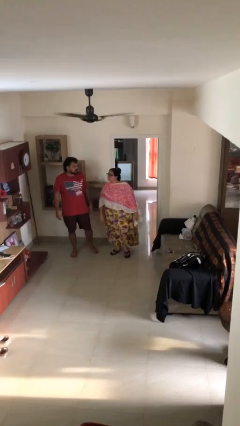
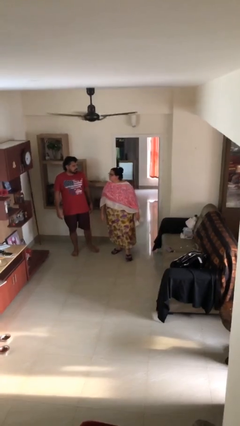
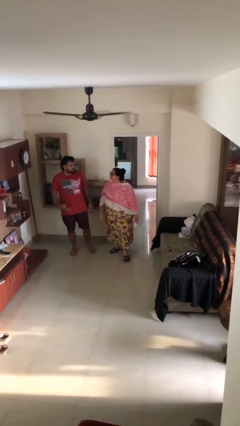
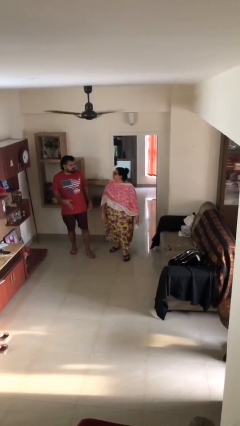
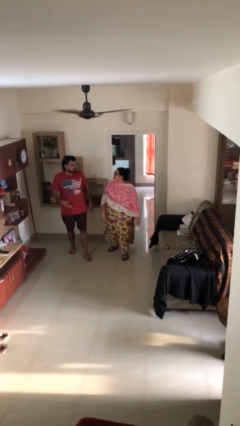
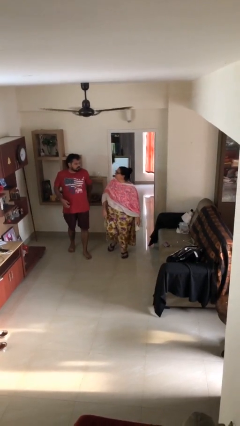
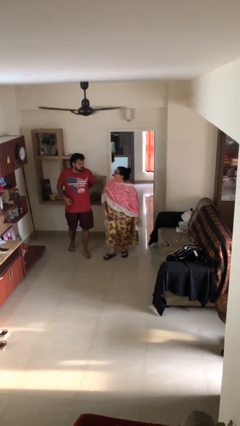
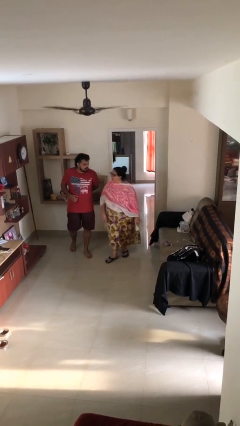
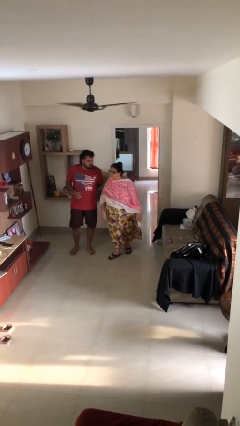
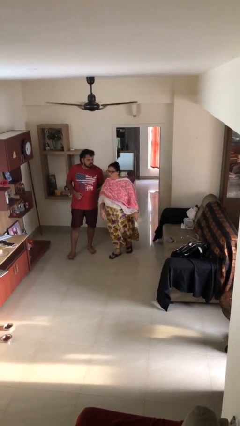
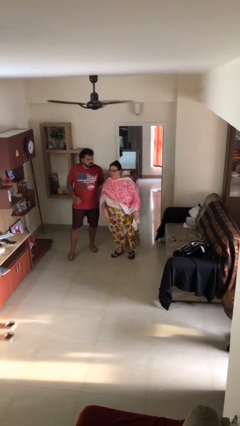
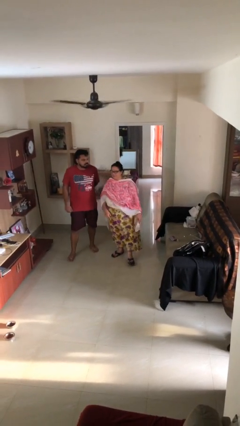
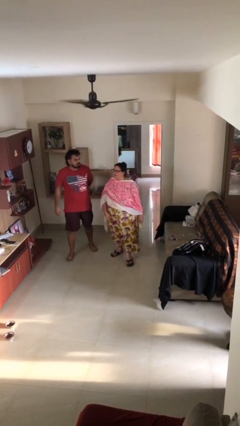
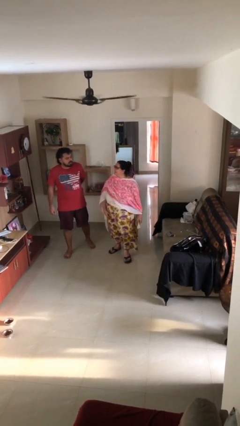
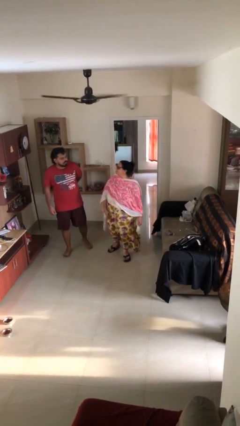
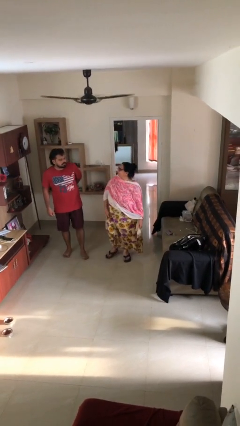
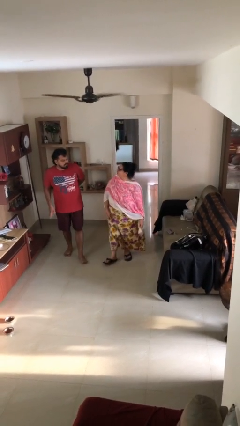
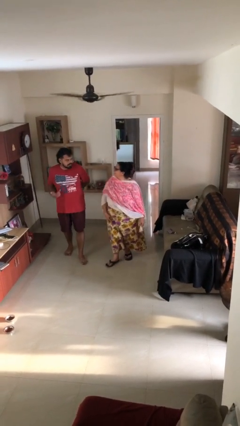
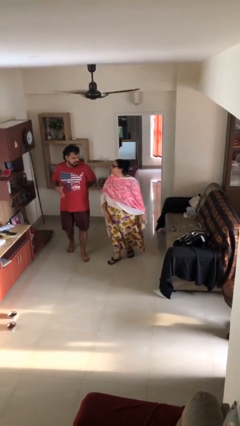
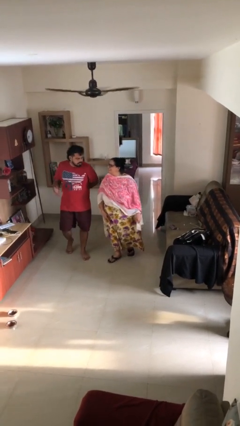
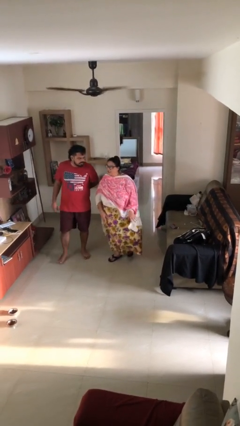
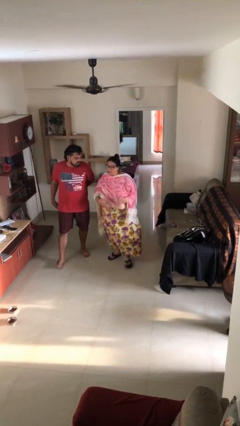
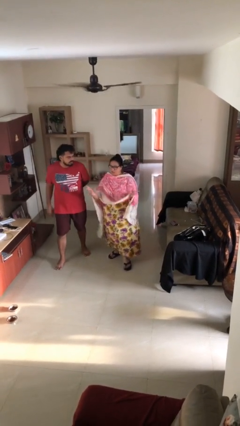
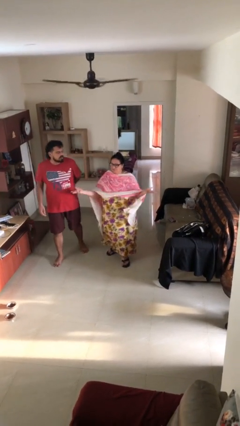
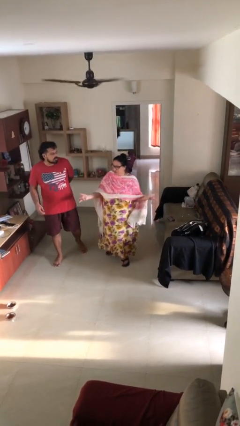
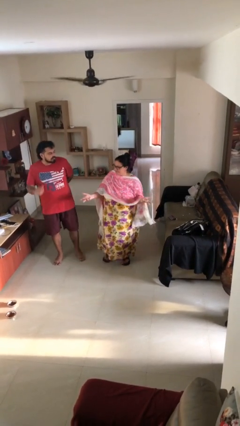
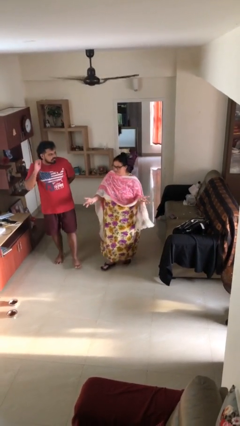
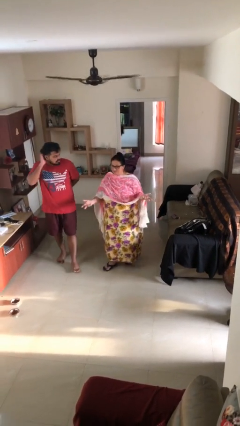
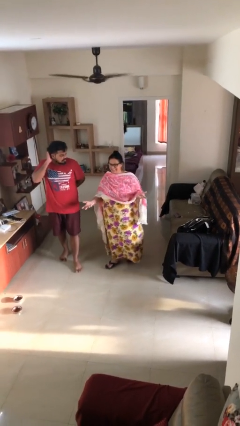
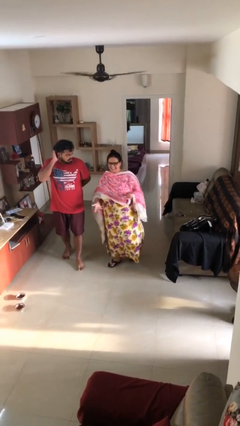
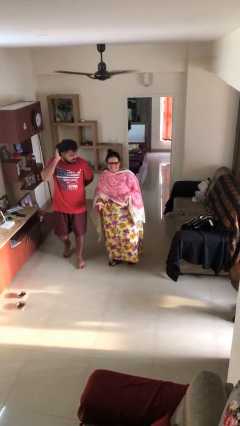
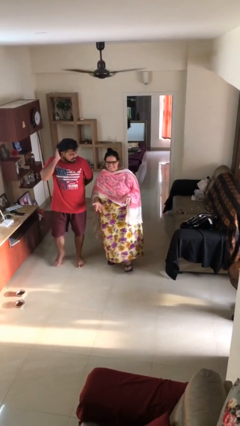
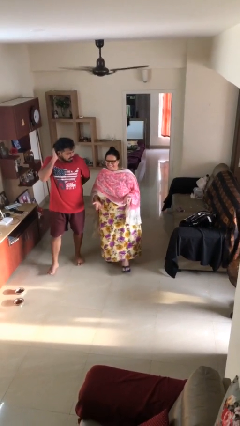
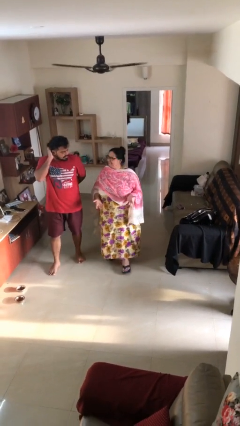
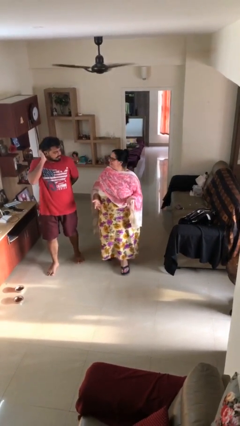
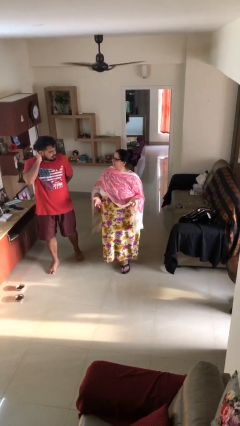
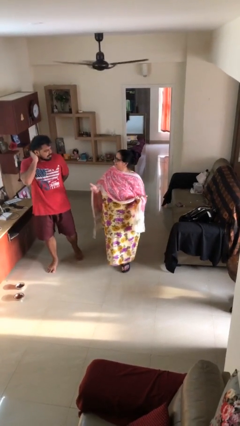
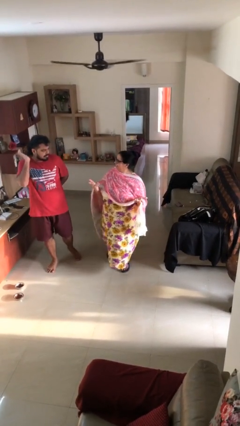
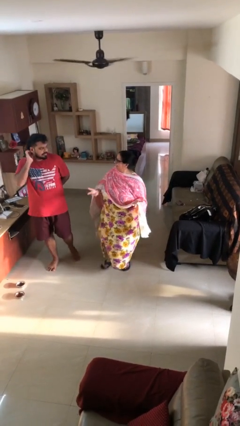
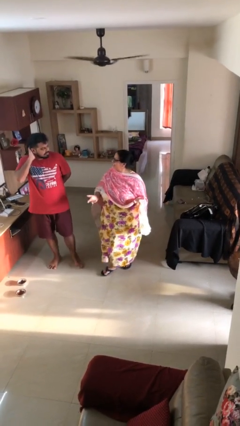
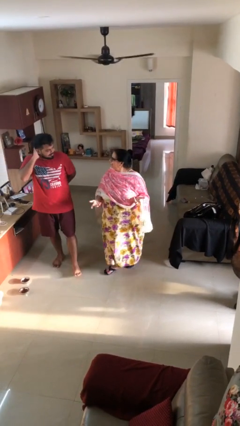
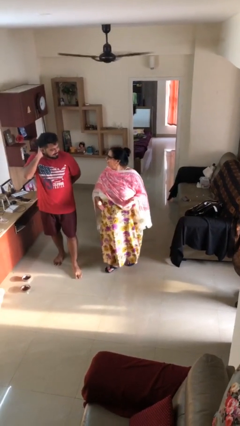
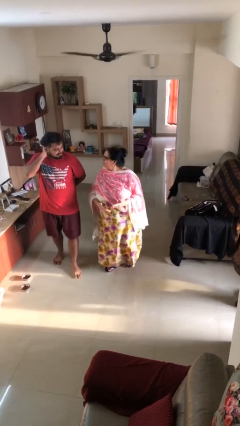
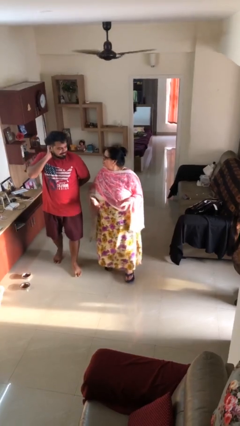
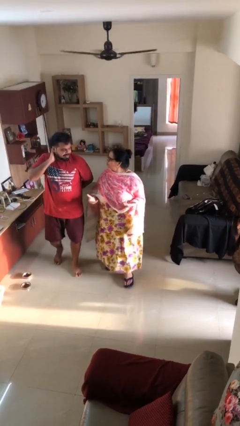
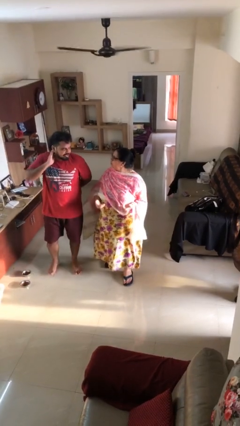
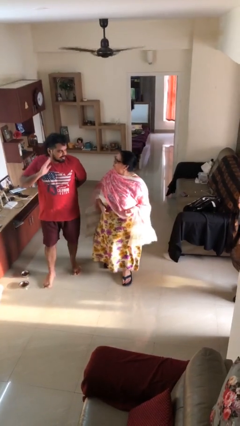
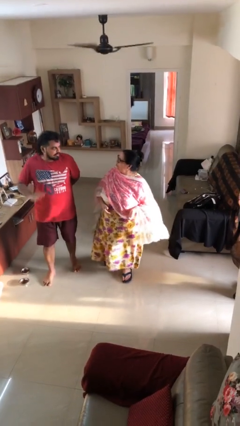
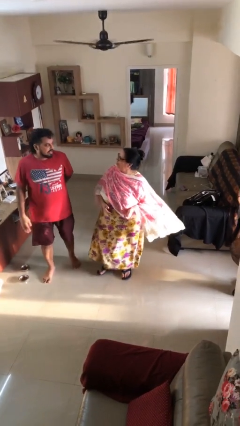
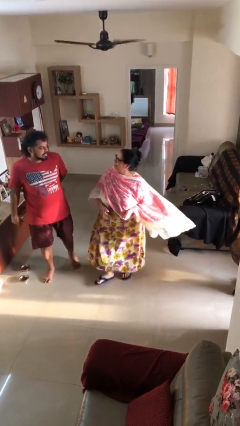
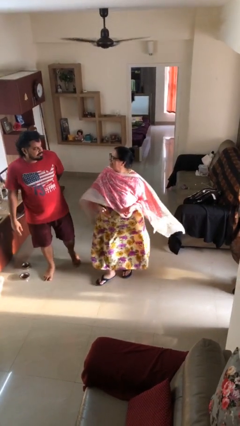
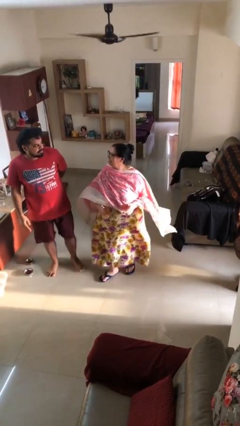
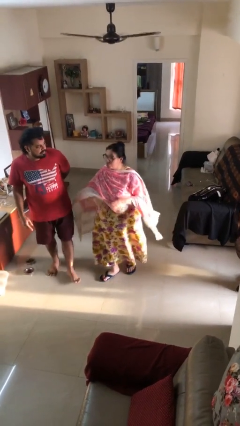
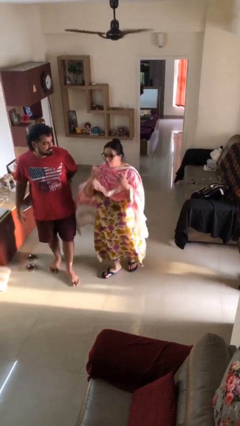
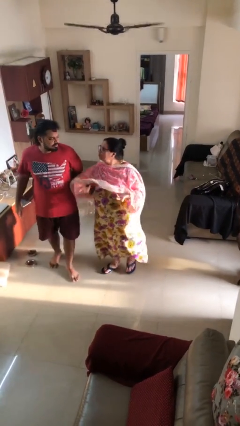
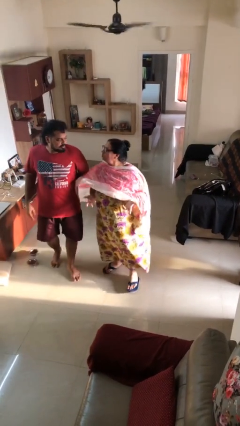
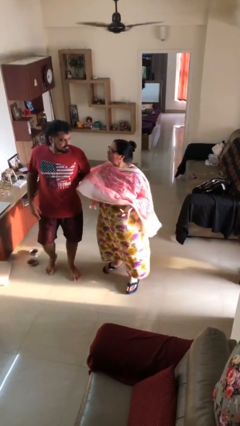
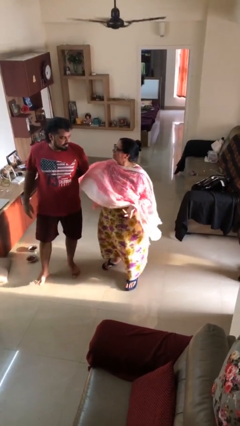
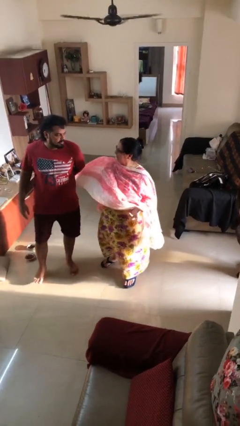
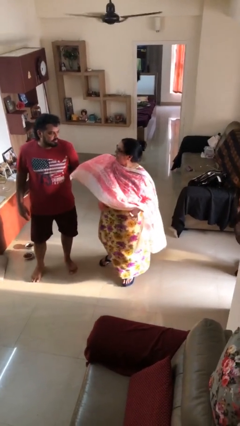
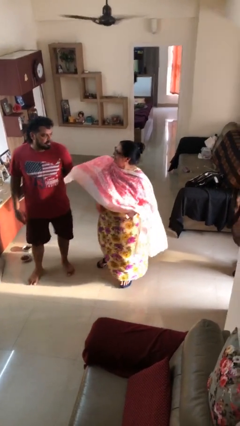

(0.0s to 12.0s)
person talks to person

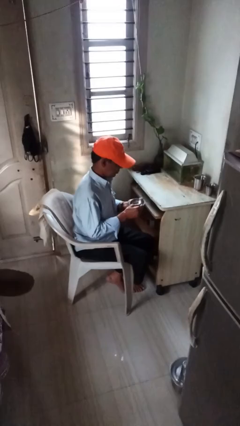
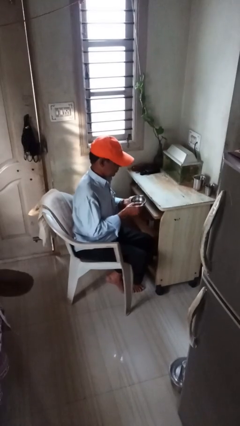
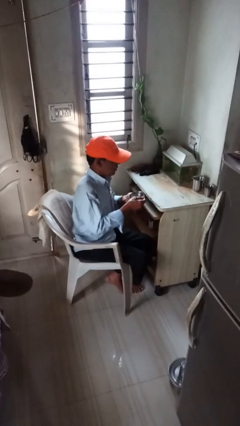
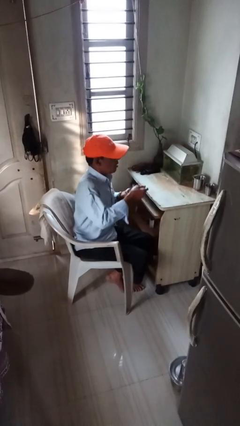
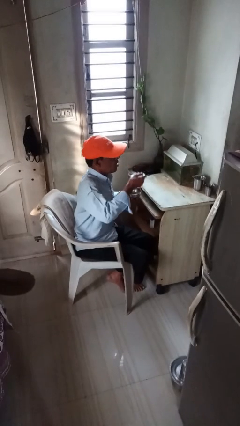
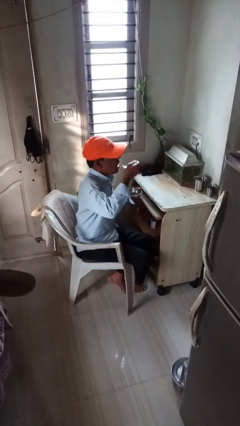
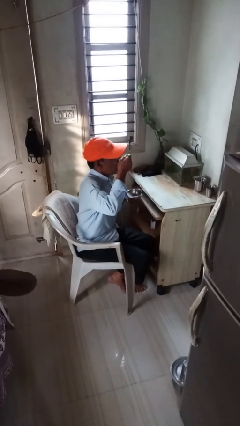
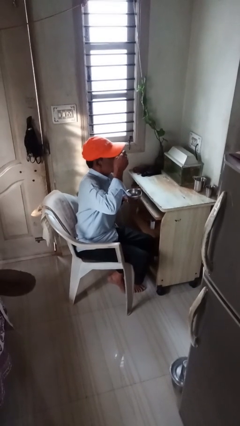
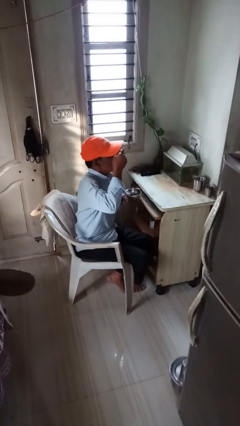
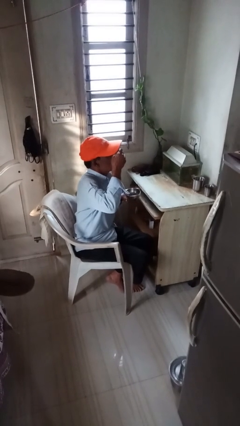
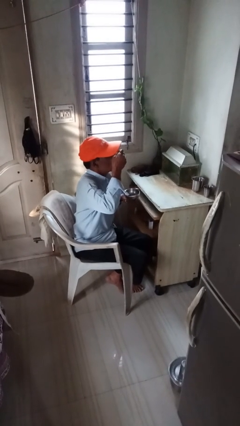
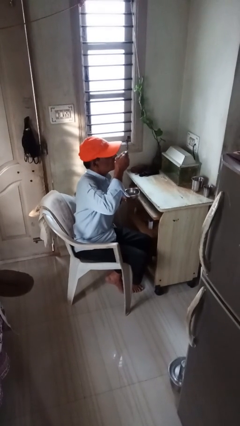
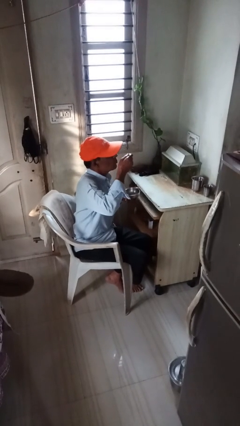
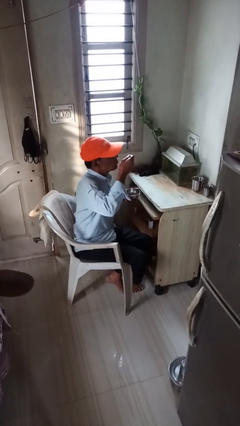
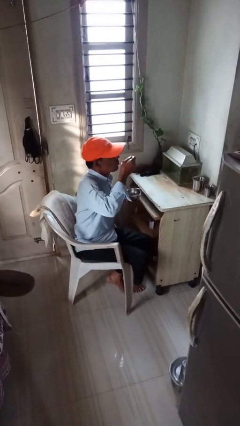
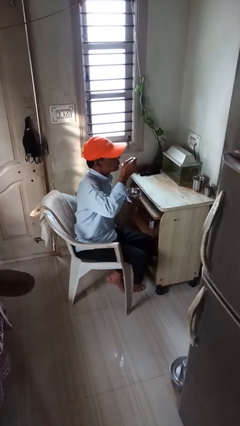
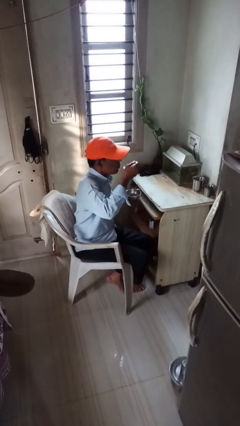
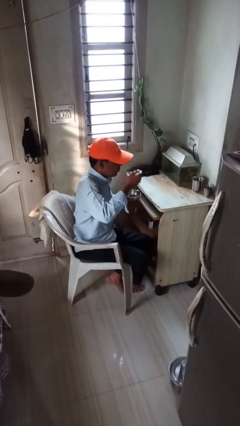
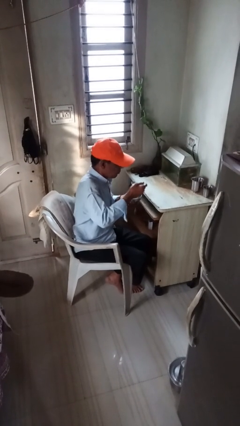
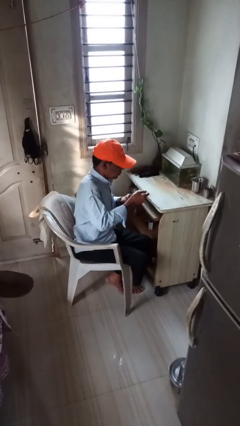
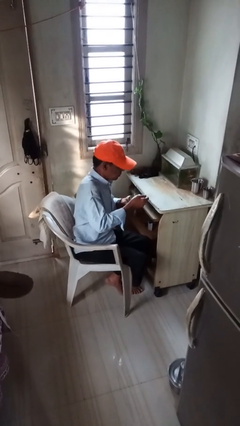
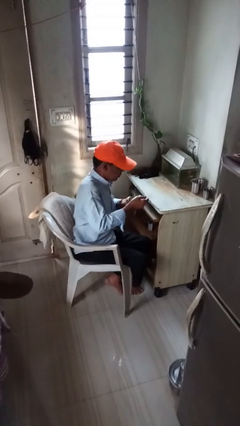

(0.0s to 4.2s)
person eats with utensil

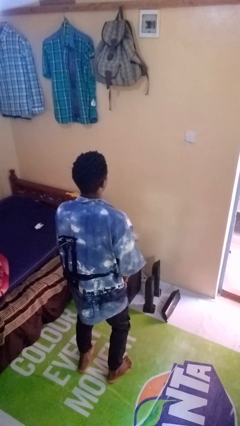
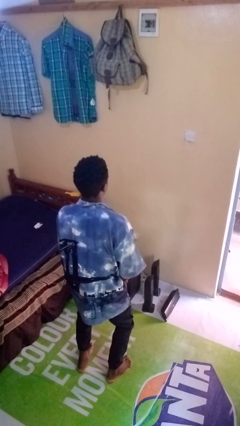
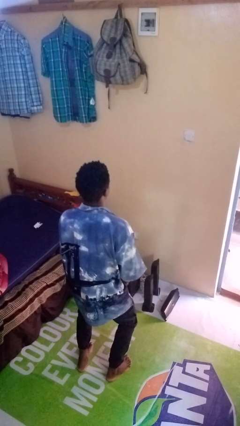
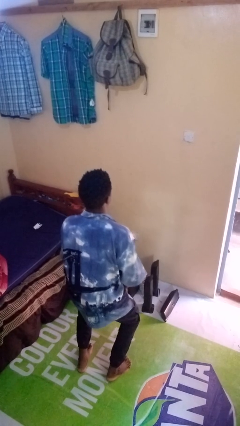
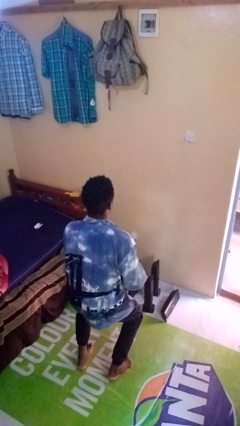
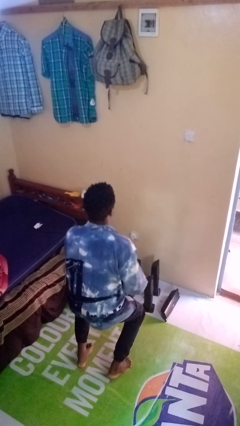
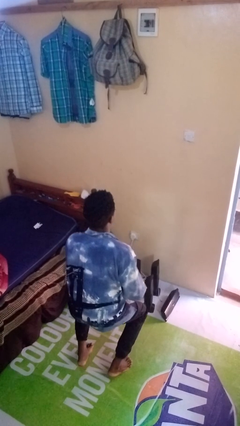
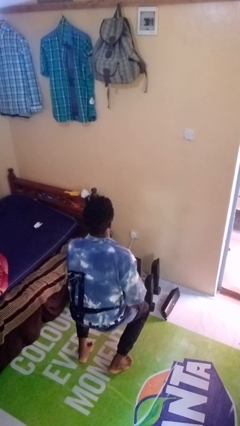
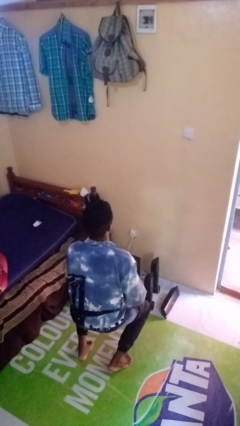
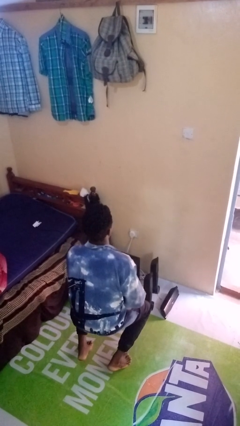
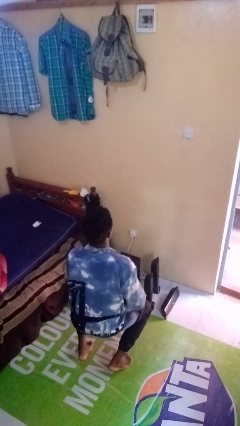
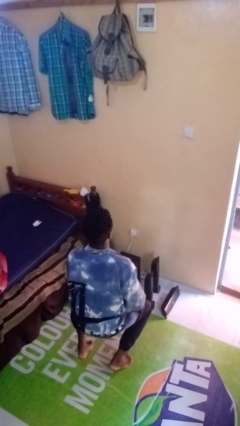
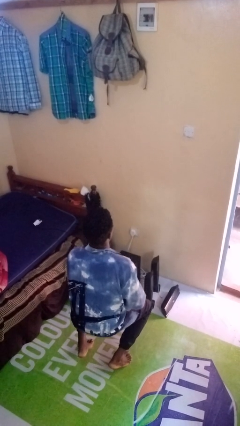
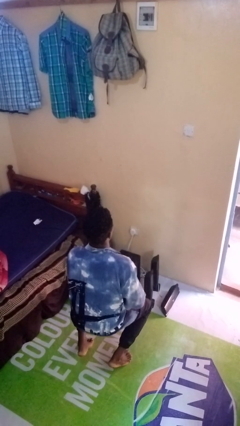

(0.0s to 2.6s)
person squats
